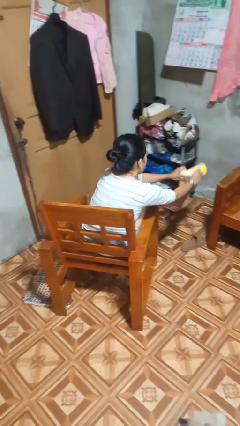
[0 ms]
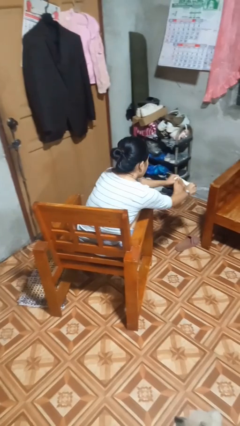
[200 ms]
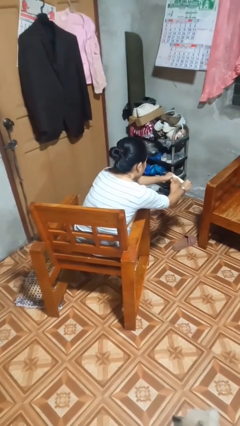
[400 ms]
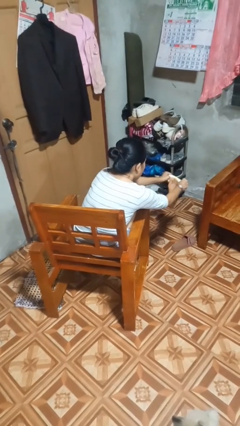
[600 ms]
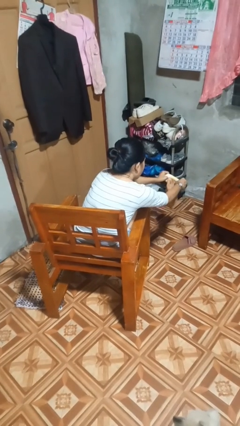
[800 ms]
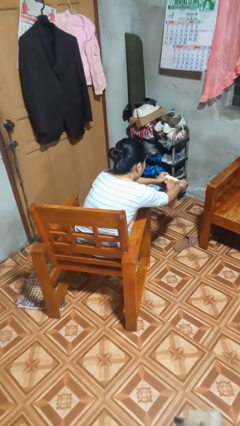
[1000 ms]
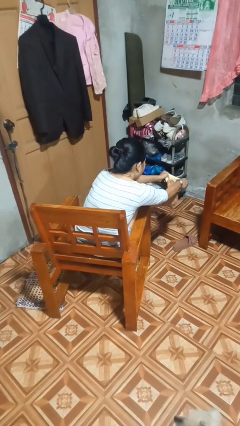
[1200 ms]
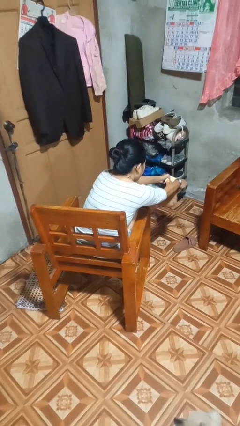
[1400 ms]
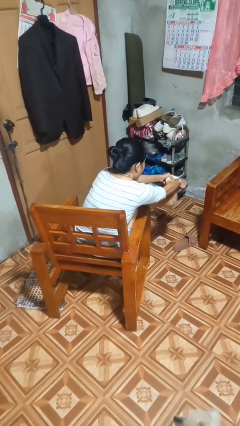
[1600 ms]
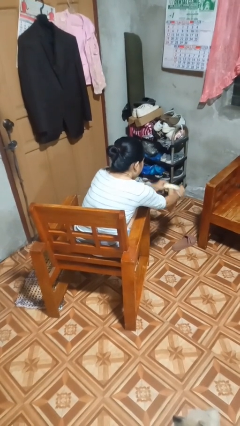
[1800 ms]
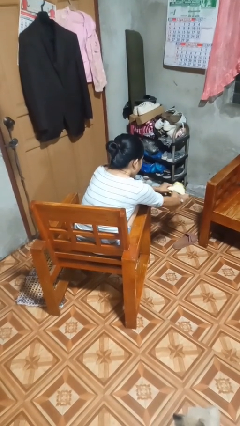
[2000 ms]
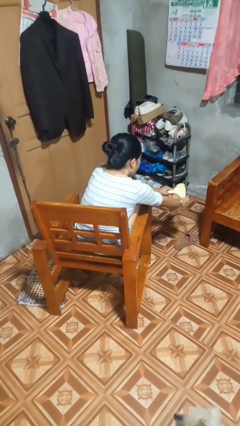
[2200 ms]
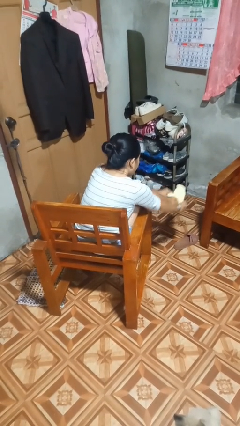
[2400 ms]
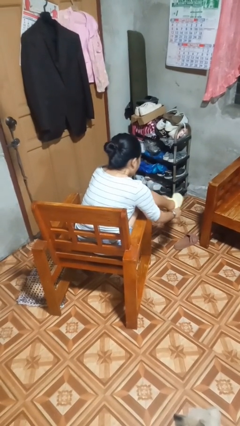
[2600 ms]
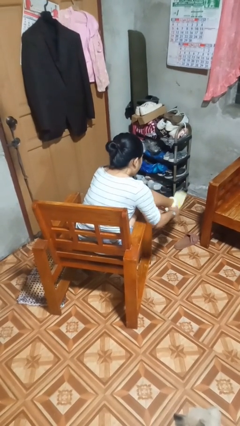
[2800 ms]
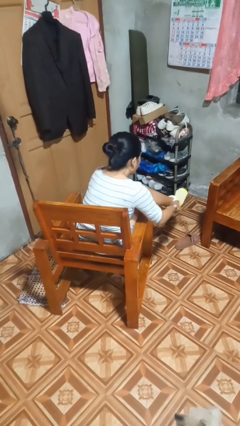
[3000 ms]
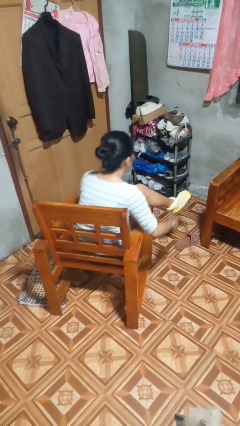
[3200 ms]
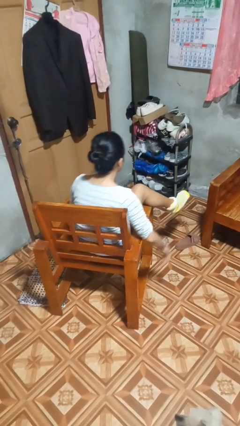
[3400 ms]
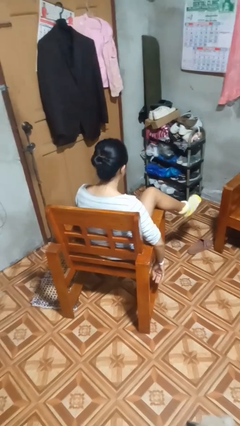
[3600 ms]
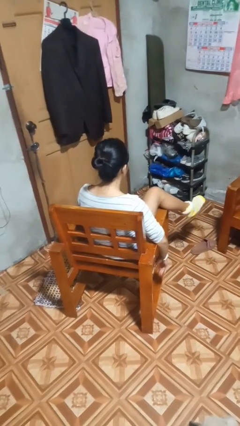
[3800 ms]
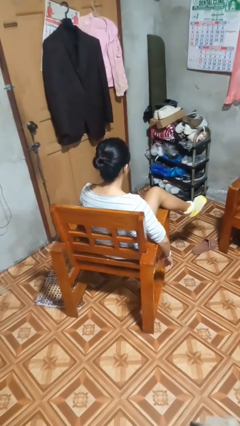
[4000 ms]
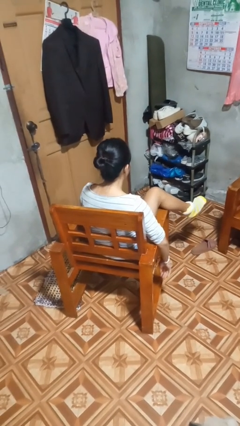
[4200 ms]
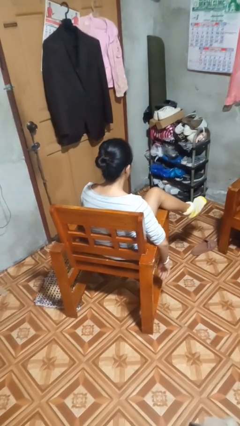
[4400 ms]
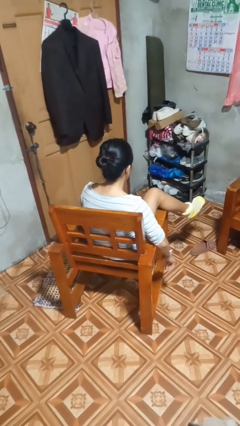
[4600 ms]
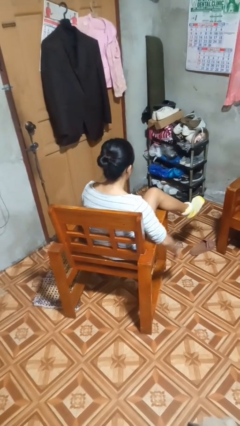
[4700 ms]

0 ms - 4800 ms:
person puts on socks

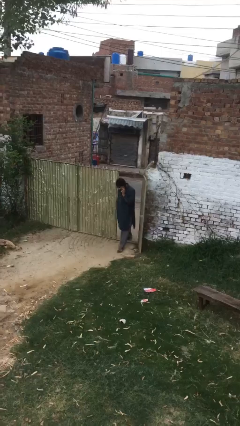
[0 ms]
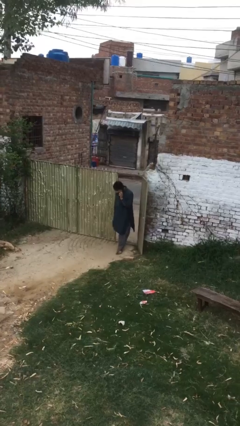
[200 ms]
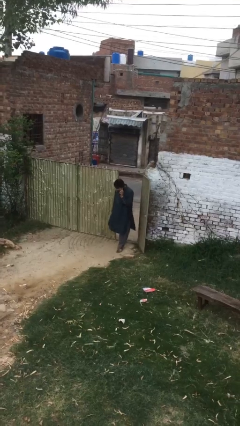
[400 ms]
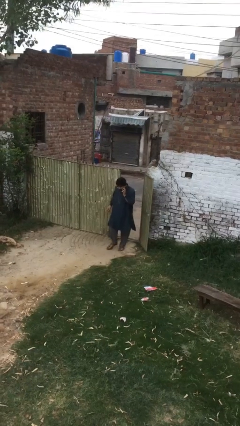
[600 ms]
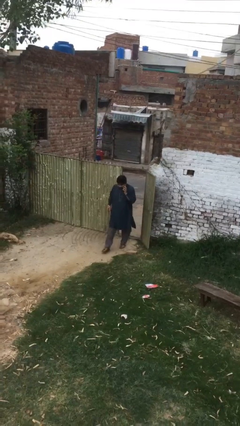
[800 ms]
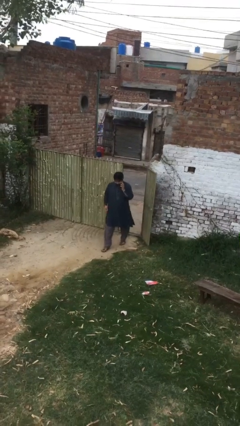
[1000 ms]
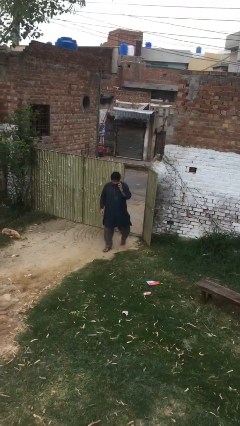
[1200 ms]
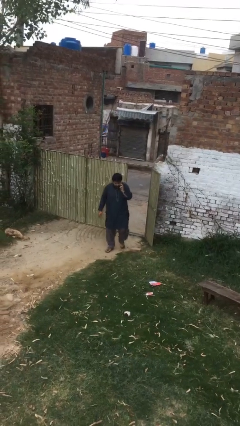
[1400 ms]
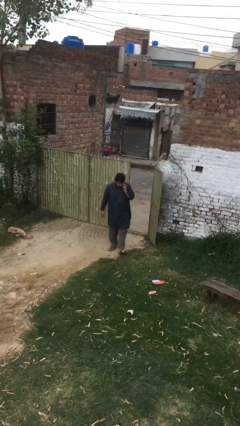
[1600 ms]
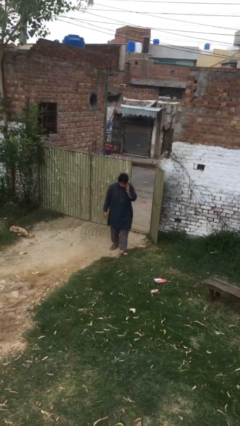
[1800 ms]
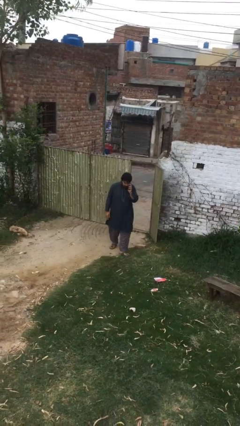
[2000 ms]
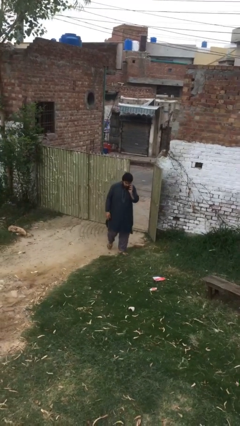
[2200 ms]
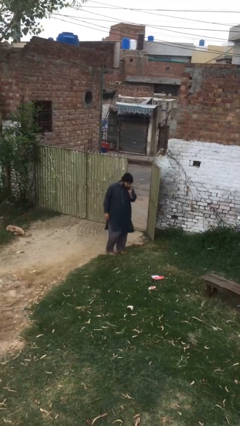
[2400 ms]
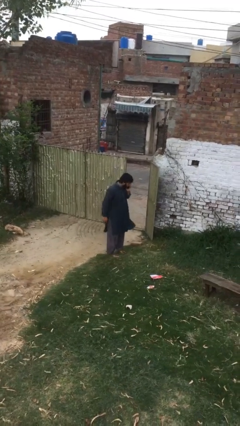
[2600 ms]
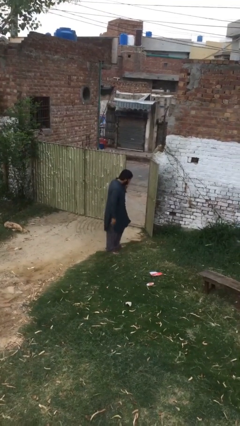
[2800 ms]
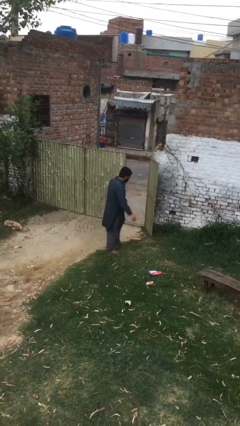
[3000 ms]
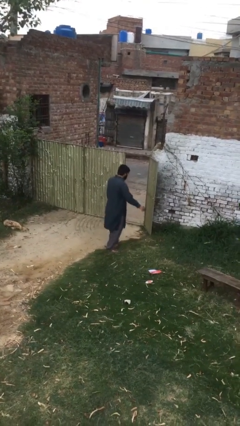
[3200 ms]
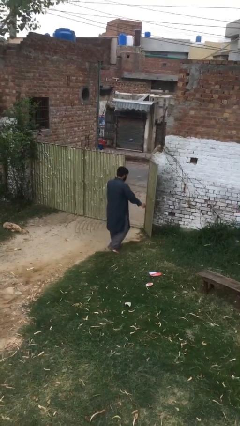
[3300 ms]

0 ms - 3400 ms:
person enters scene through structure

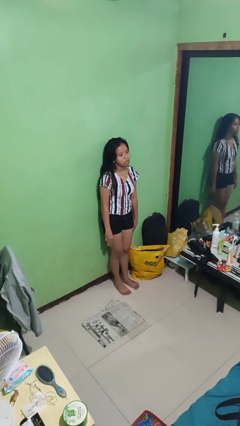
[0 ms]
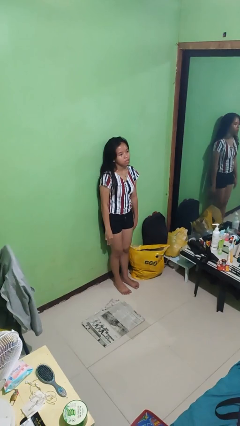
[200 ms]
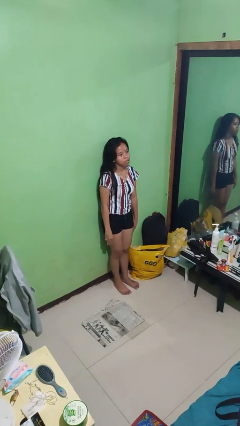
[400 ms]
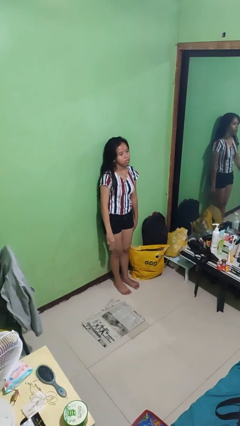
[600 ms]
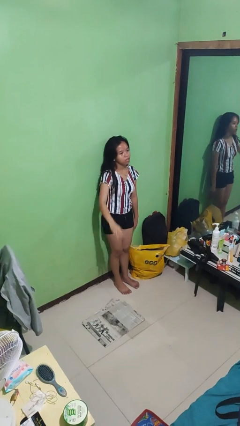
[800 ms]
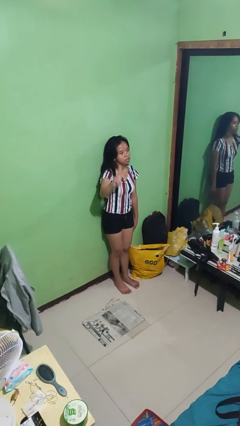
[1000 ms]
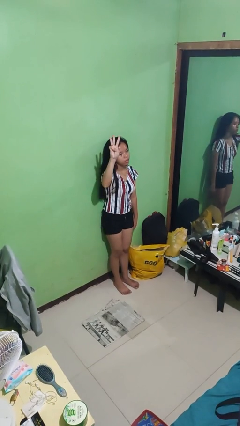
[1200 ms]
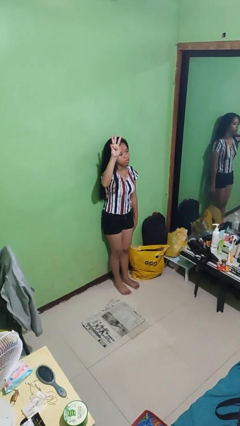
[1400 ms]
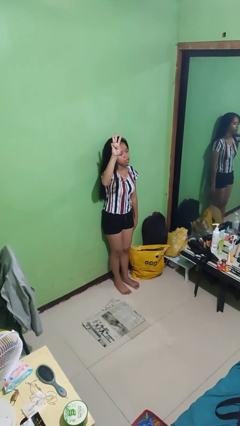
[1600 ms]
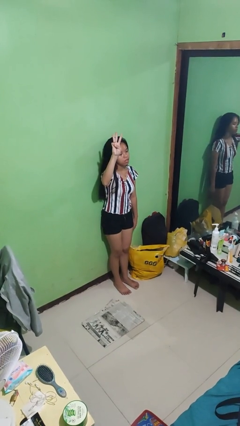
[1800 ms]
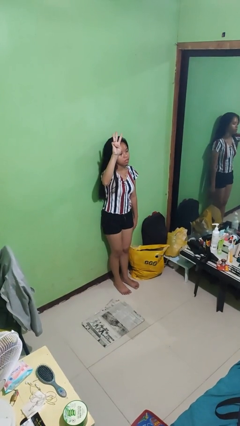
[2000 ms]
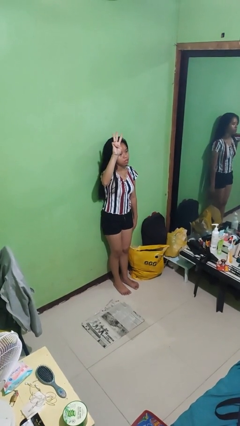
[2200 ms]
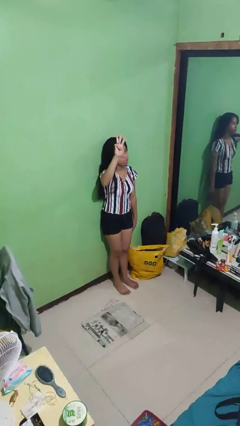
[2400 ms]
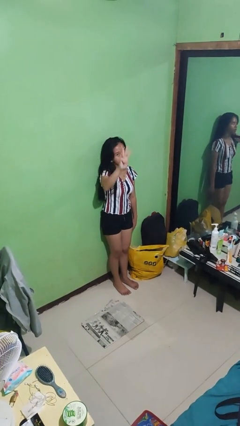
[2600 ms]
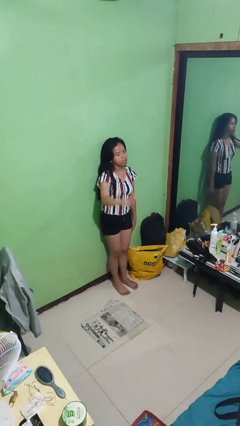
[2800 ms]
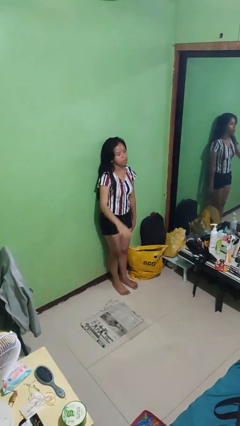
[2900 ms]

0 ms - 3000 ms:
person gestures number three

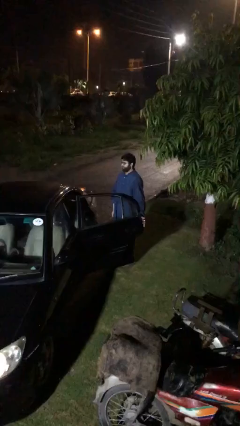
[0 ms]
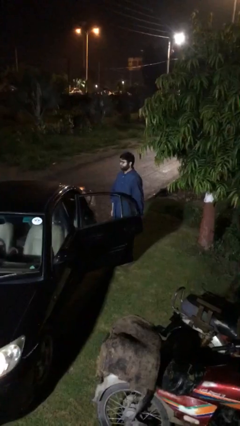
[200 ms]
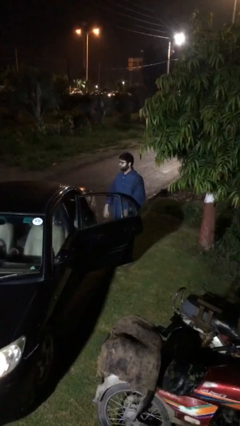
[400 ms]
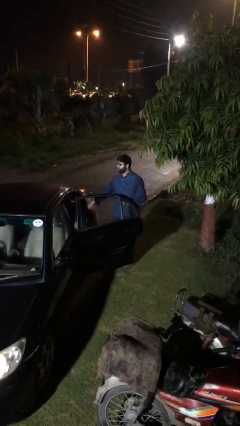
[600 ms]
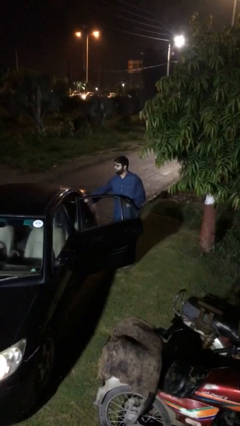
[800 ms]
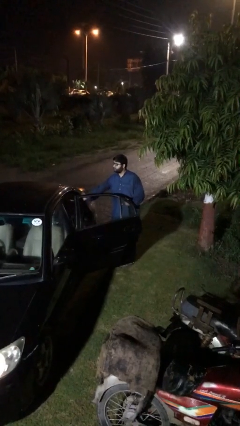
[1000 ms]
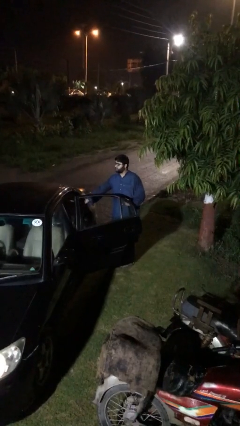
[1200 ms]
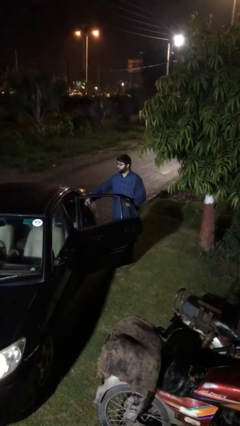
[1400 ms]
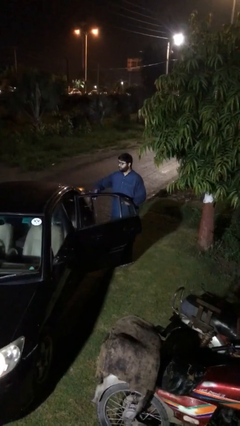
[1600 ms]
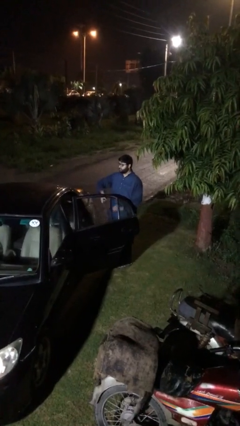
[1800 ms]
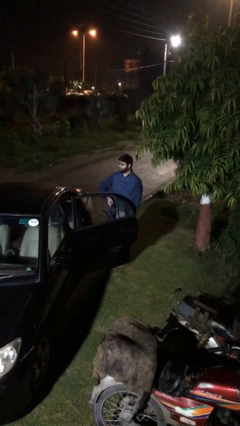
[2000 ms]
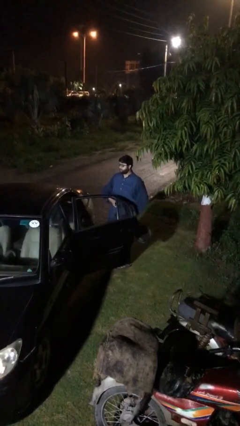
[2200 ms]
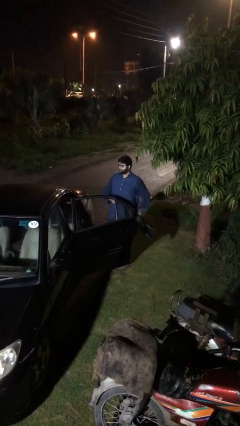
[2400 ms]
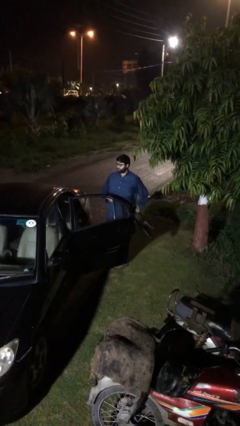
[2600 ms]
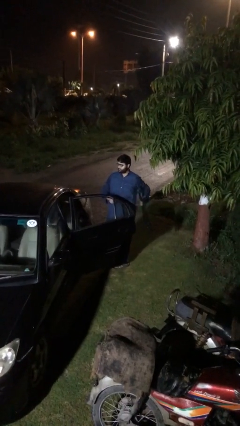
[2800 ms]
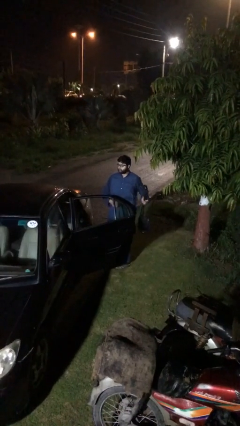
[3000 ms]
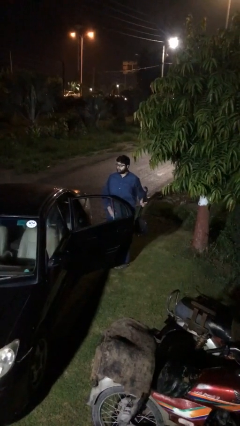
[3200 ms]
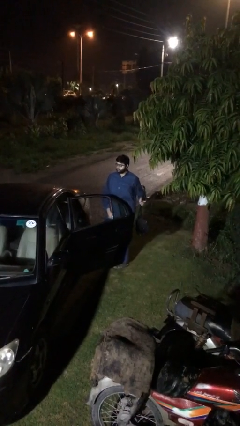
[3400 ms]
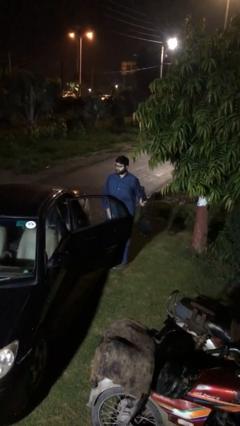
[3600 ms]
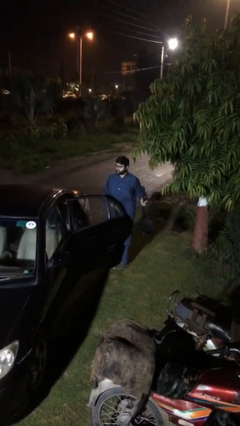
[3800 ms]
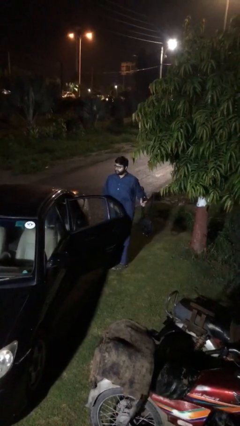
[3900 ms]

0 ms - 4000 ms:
person unloads car

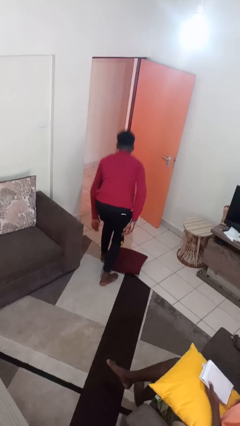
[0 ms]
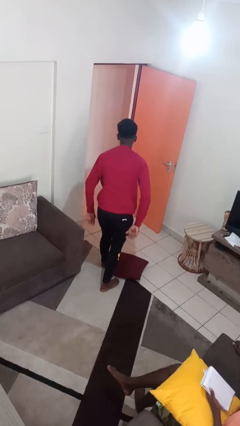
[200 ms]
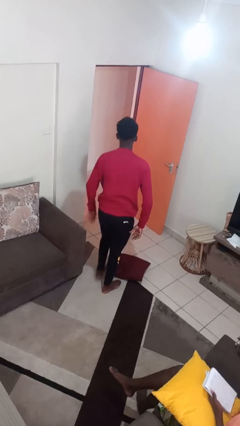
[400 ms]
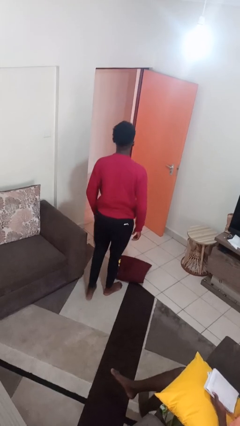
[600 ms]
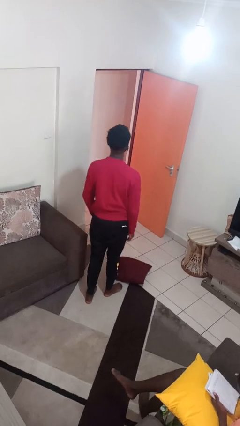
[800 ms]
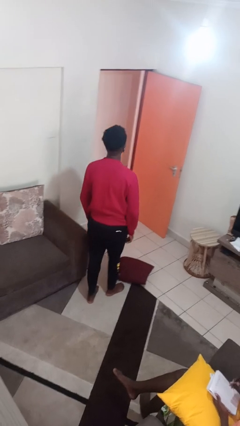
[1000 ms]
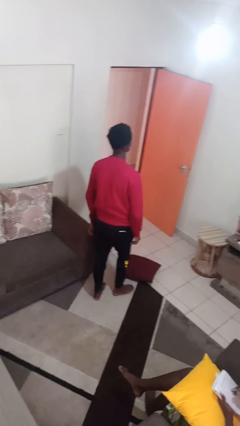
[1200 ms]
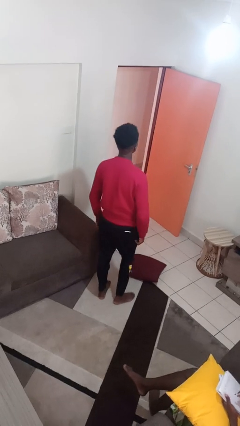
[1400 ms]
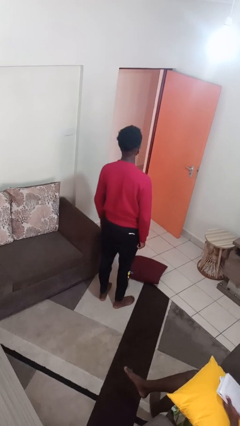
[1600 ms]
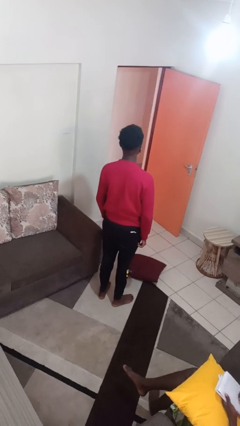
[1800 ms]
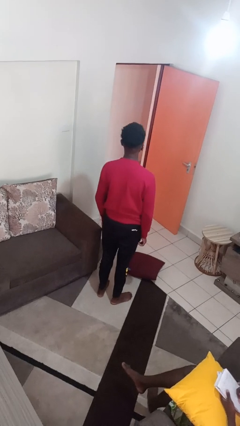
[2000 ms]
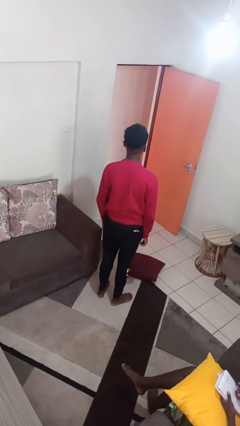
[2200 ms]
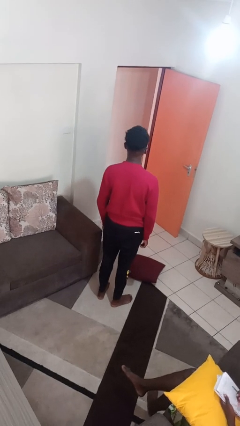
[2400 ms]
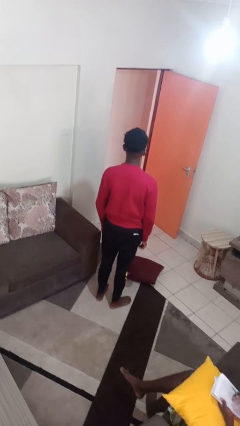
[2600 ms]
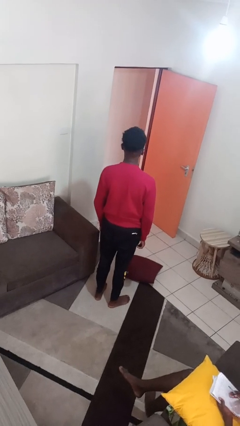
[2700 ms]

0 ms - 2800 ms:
person stands up from floor
